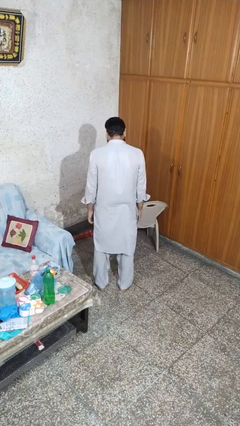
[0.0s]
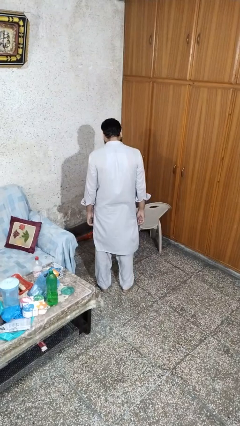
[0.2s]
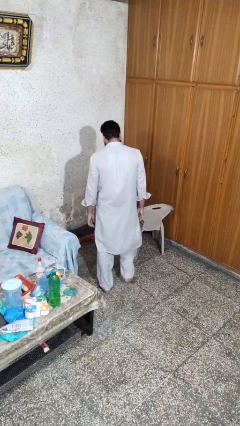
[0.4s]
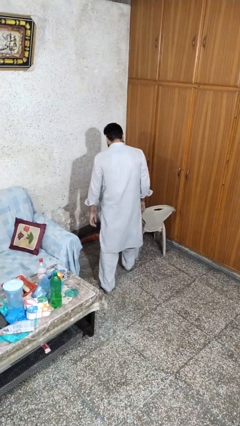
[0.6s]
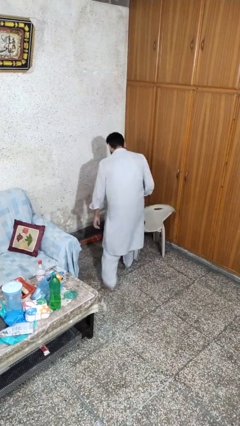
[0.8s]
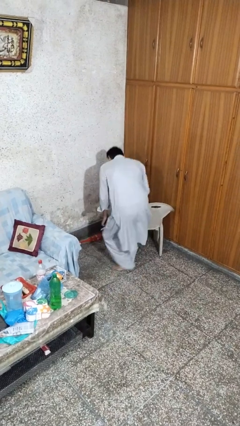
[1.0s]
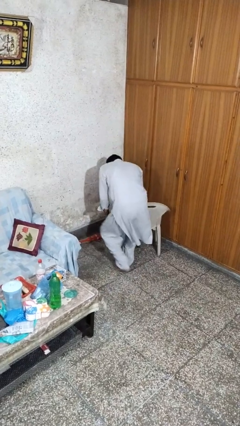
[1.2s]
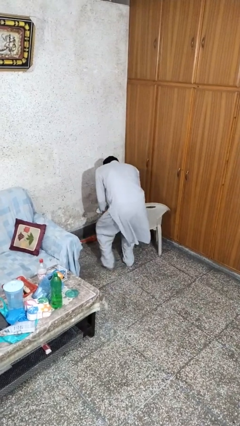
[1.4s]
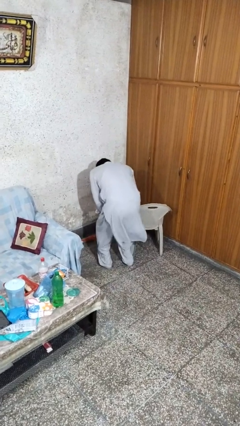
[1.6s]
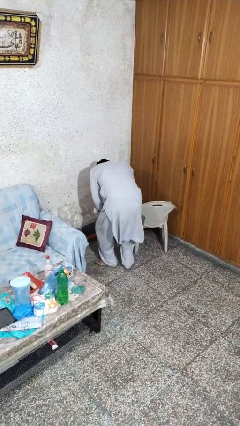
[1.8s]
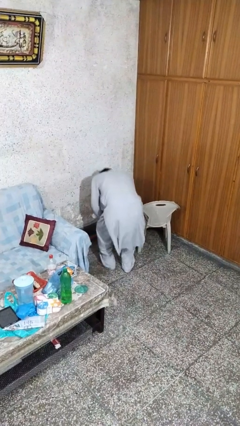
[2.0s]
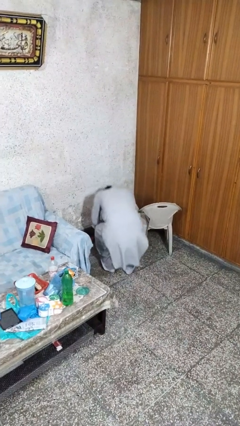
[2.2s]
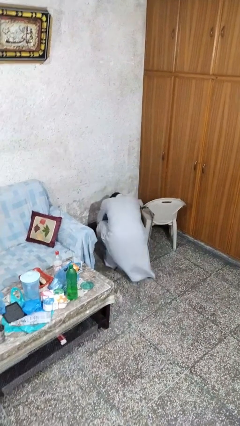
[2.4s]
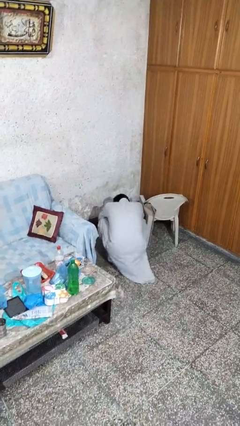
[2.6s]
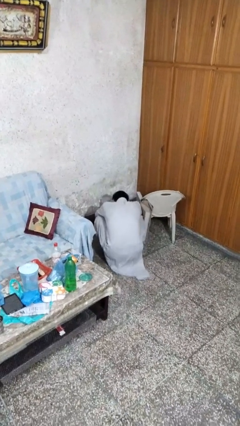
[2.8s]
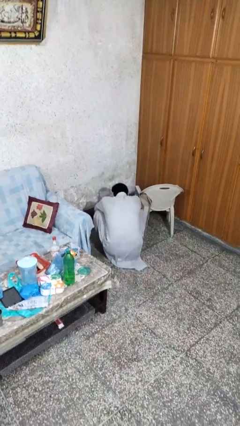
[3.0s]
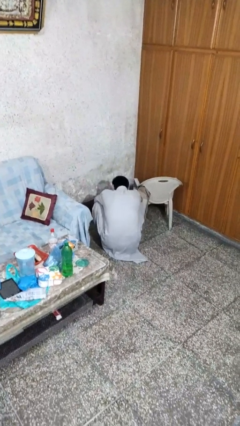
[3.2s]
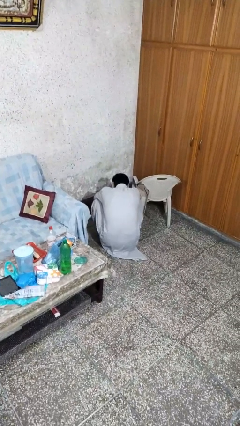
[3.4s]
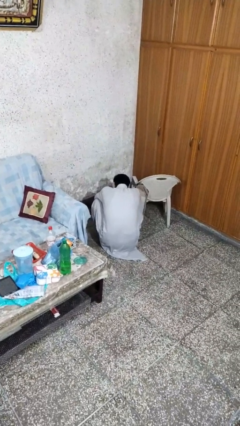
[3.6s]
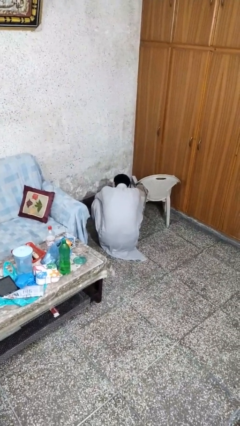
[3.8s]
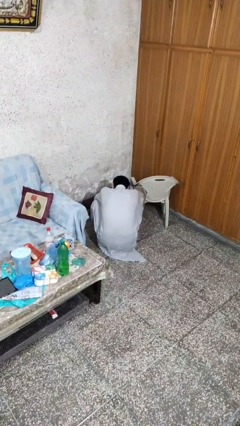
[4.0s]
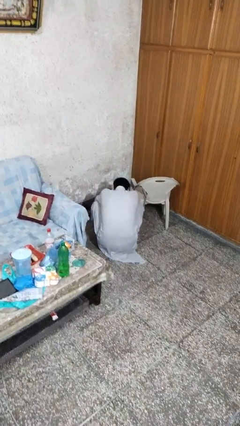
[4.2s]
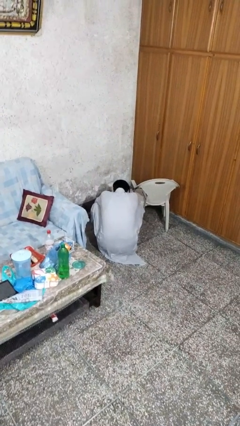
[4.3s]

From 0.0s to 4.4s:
person trips on object on floor

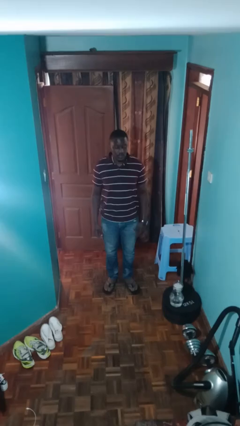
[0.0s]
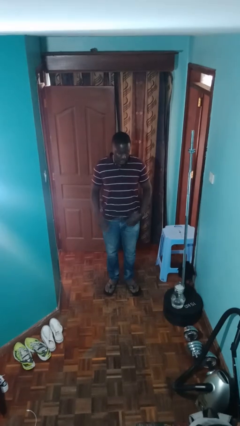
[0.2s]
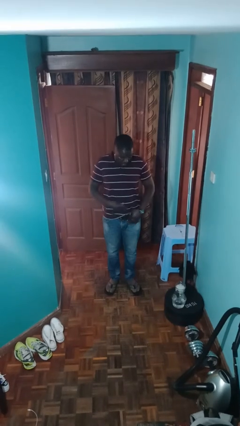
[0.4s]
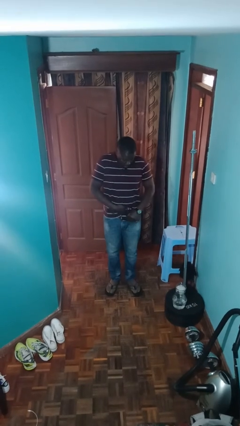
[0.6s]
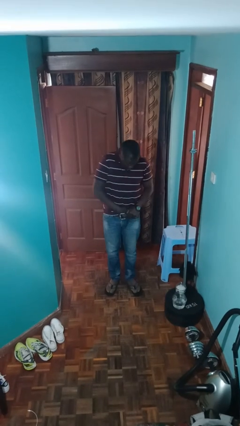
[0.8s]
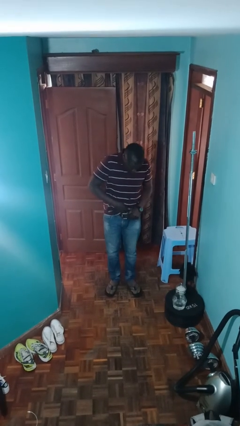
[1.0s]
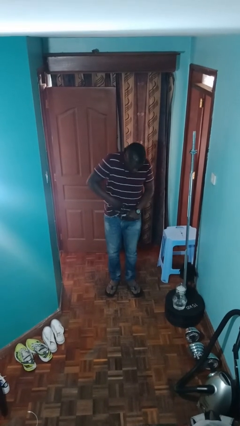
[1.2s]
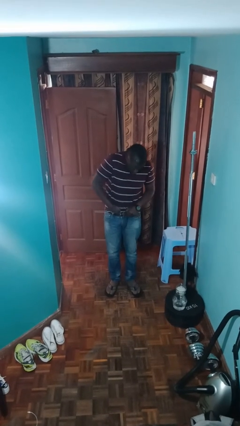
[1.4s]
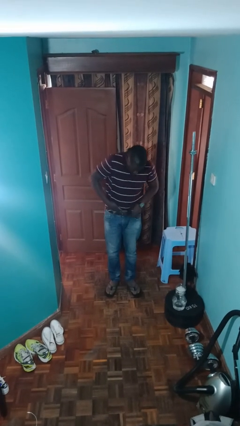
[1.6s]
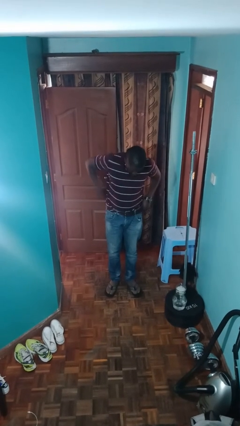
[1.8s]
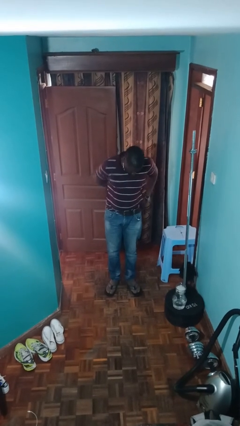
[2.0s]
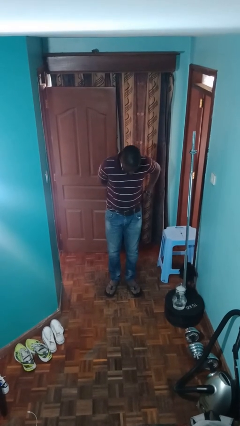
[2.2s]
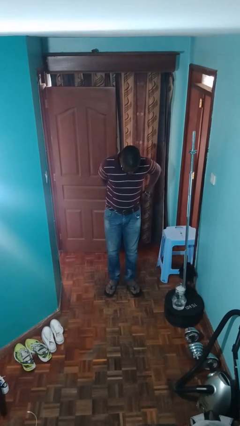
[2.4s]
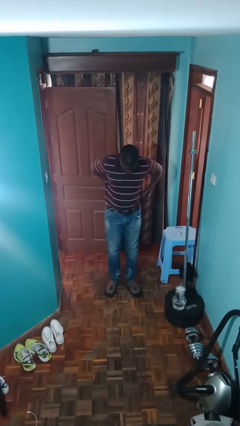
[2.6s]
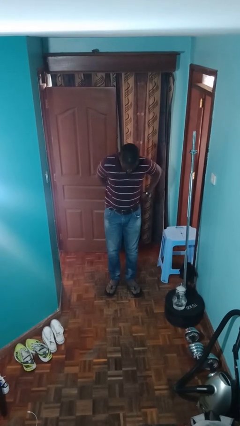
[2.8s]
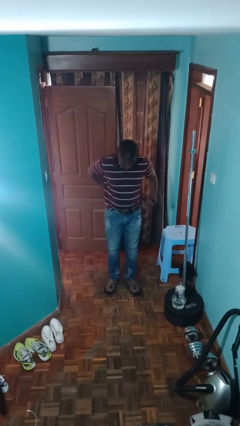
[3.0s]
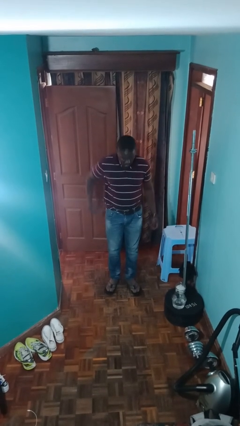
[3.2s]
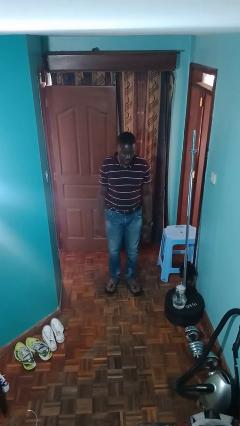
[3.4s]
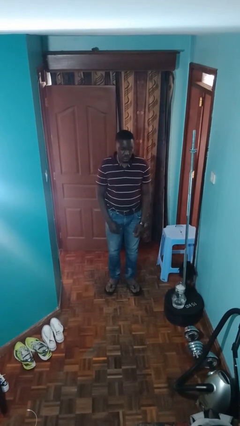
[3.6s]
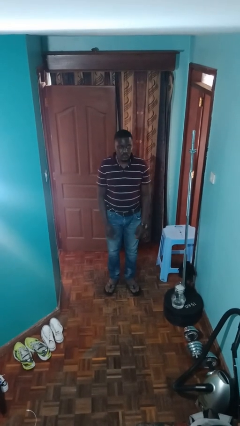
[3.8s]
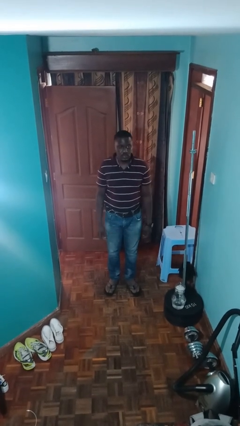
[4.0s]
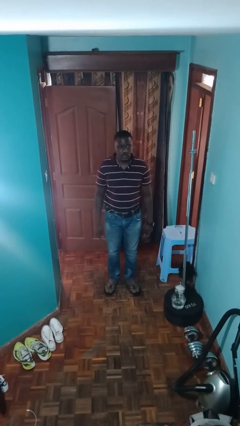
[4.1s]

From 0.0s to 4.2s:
person tucks in shirt

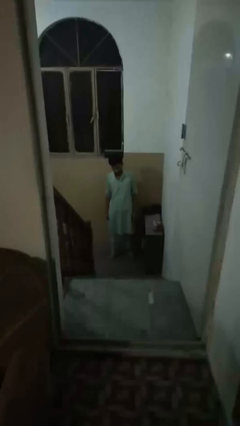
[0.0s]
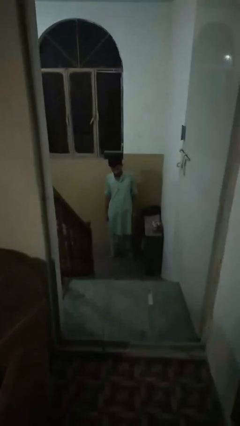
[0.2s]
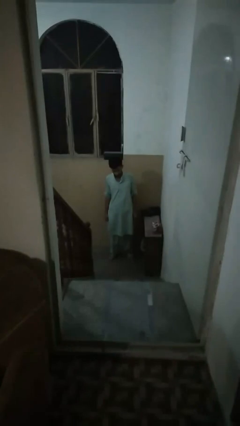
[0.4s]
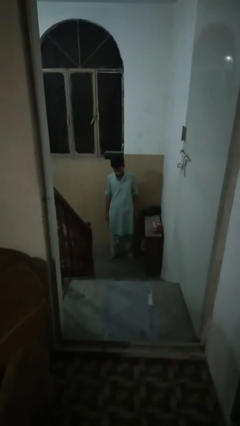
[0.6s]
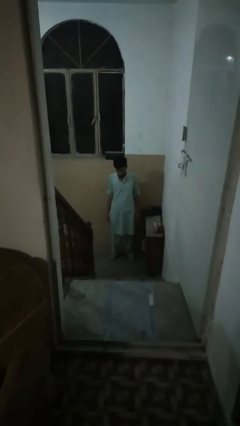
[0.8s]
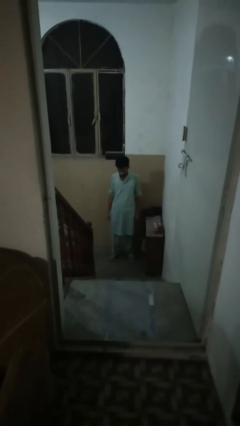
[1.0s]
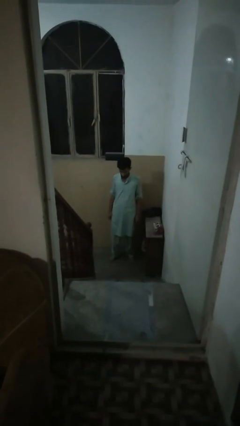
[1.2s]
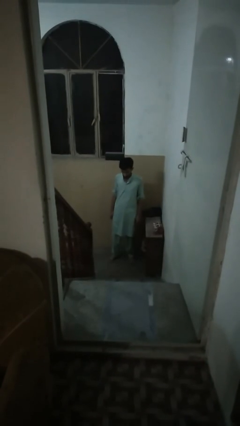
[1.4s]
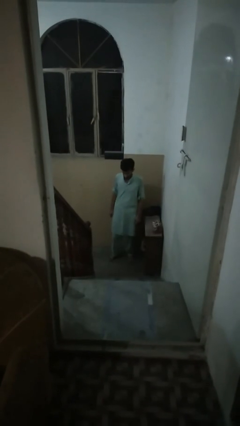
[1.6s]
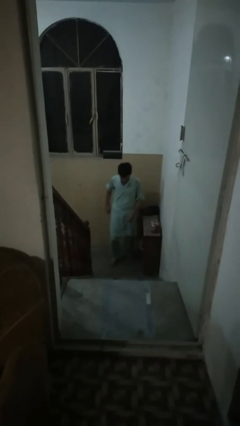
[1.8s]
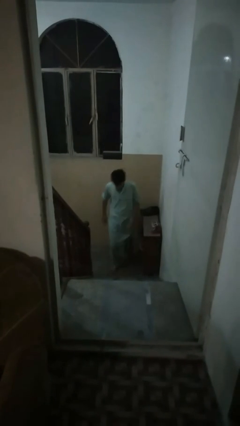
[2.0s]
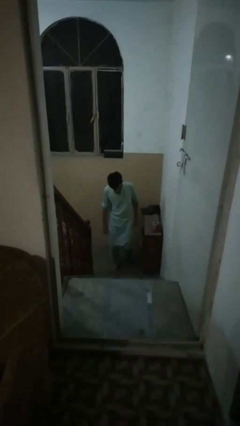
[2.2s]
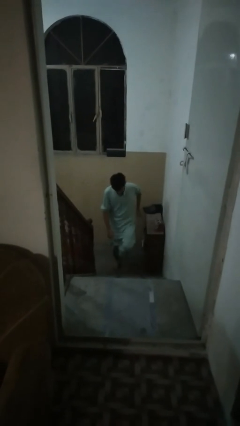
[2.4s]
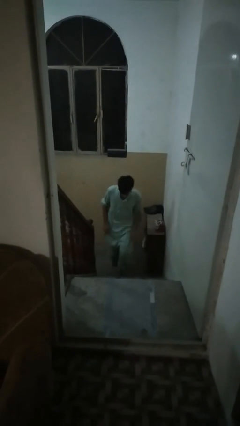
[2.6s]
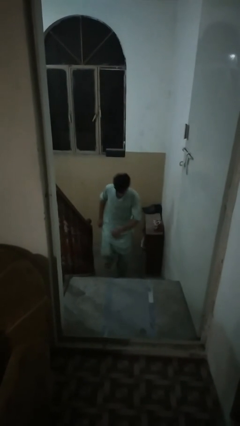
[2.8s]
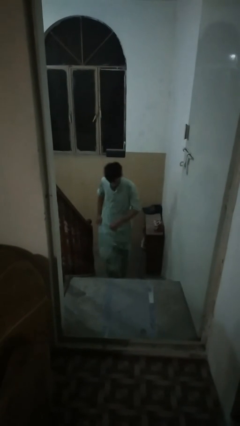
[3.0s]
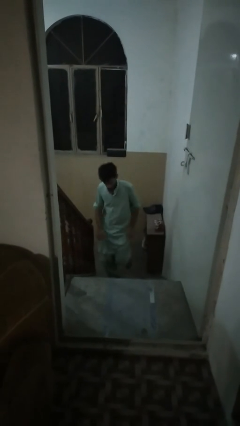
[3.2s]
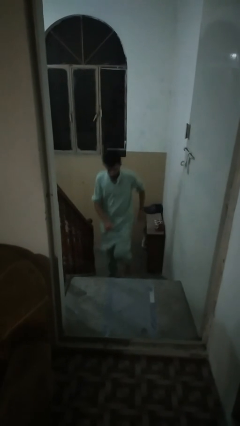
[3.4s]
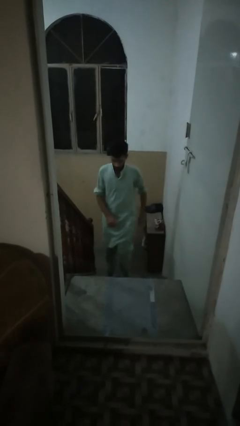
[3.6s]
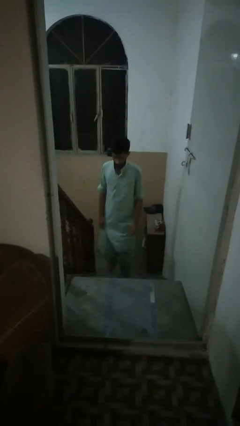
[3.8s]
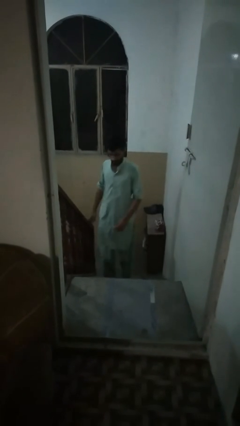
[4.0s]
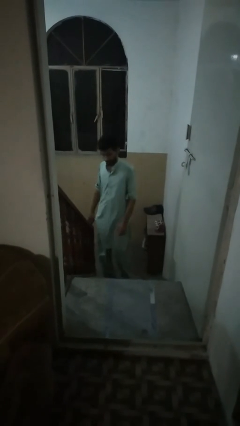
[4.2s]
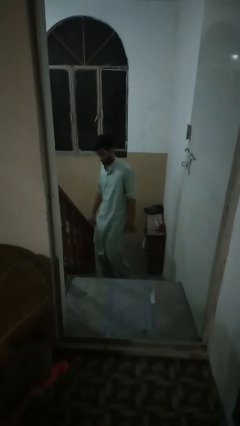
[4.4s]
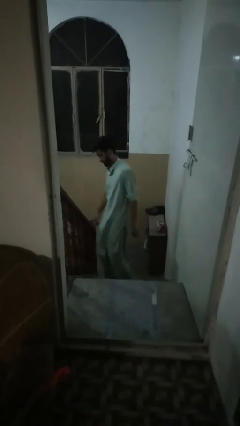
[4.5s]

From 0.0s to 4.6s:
person climbs up stairs

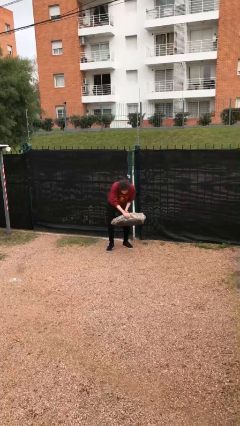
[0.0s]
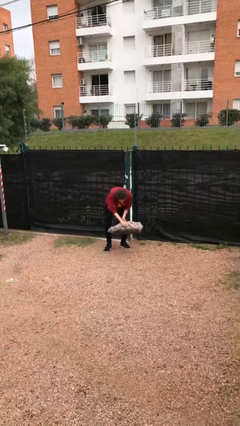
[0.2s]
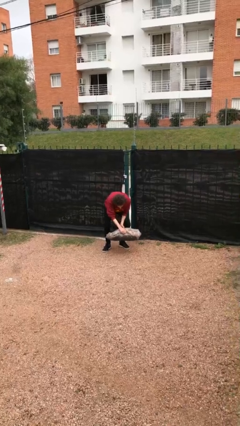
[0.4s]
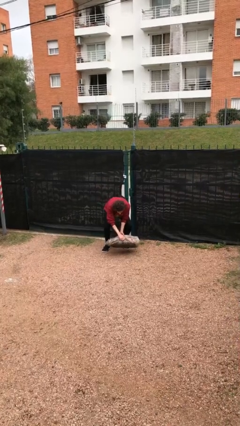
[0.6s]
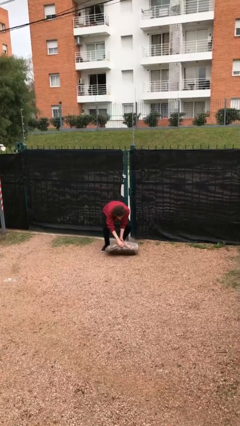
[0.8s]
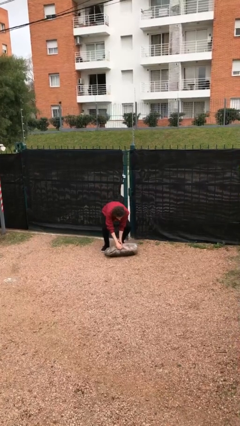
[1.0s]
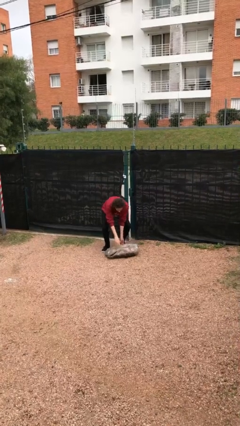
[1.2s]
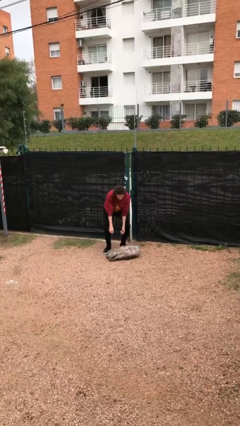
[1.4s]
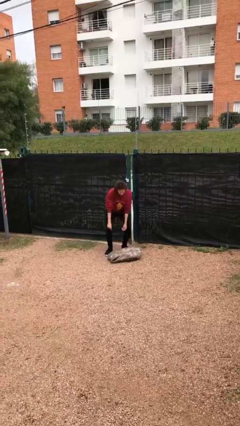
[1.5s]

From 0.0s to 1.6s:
person puts down object on floor

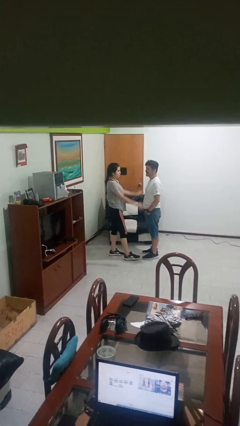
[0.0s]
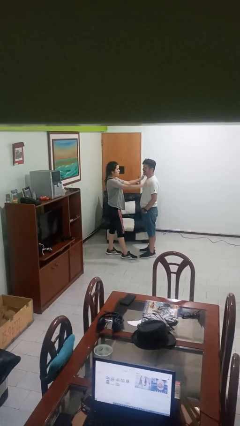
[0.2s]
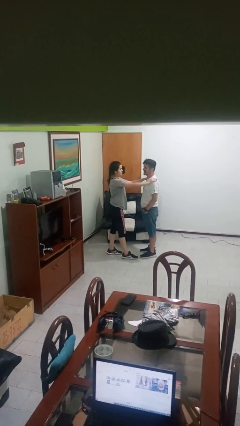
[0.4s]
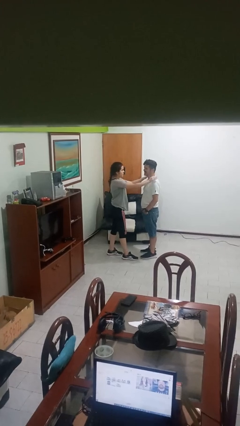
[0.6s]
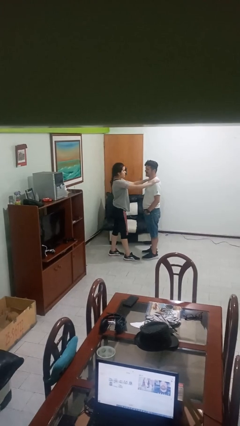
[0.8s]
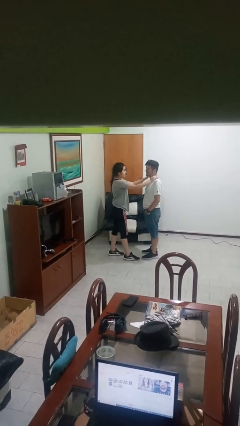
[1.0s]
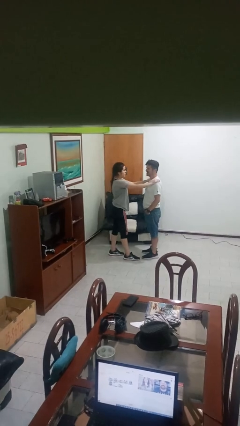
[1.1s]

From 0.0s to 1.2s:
person pounds shoulders of person

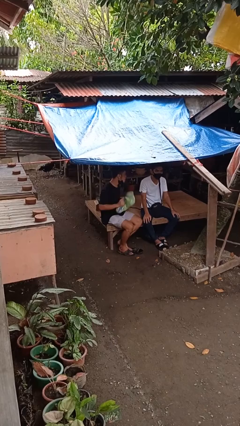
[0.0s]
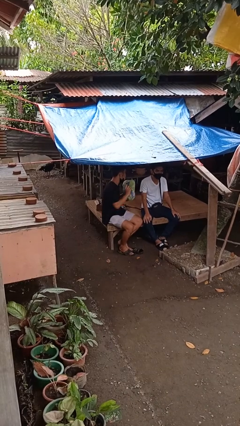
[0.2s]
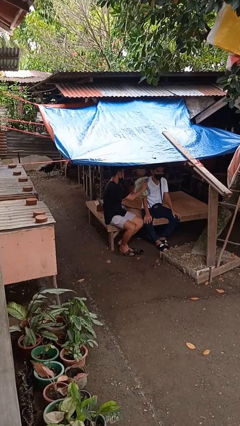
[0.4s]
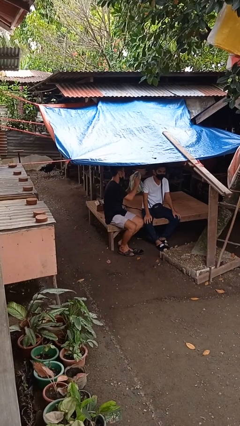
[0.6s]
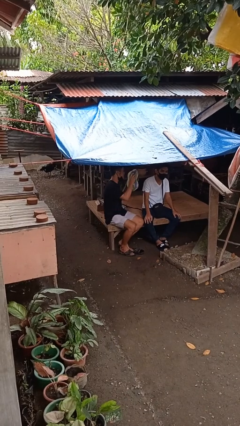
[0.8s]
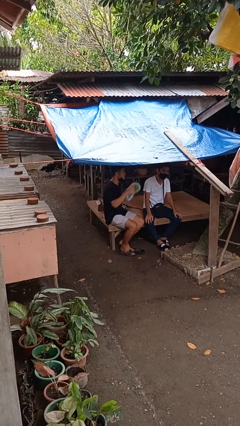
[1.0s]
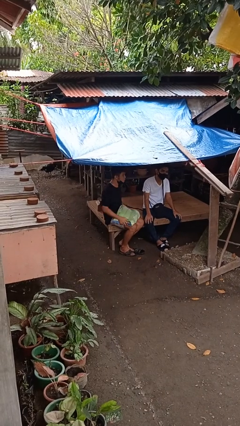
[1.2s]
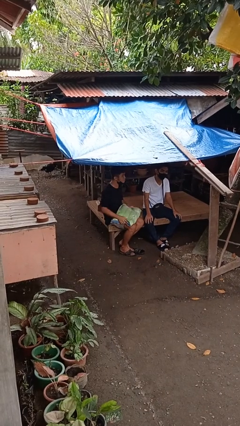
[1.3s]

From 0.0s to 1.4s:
person hits person with pillow
